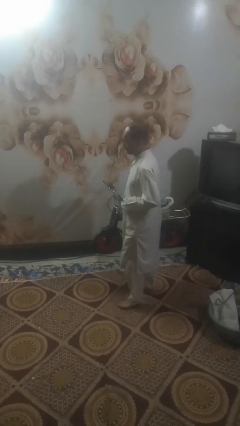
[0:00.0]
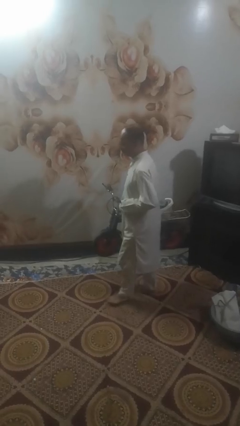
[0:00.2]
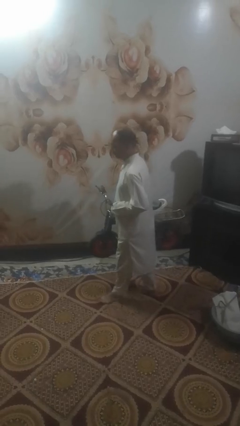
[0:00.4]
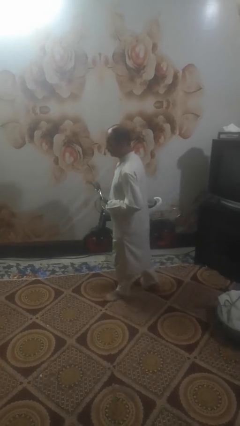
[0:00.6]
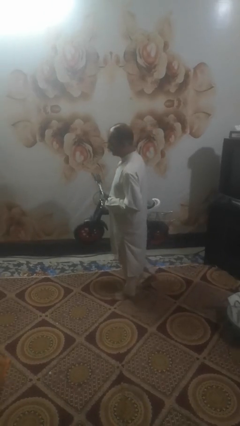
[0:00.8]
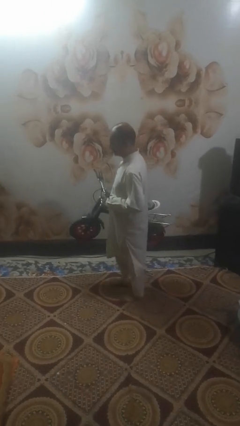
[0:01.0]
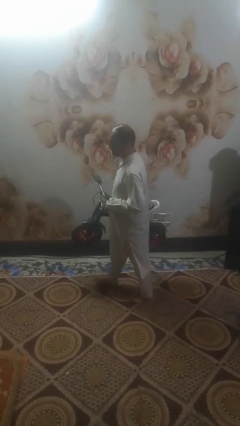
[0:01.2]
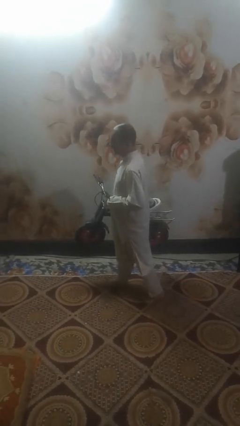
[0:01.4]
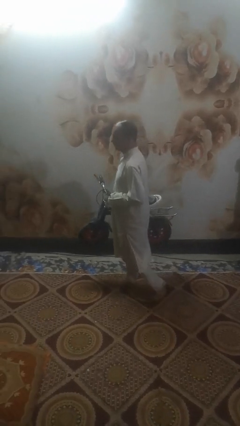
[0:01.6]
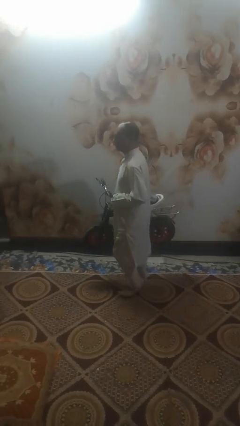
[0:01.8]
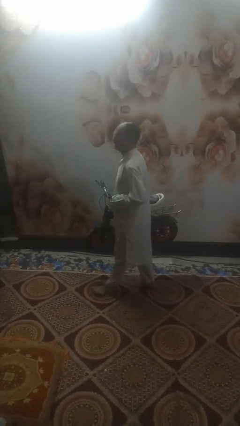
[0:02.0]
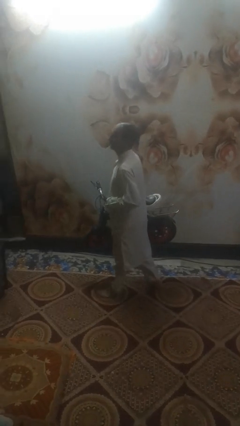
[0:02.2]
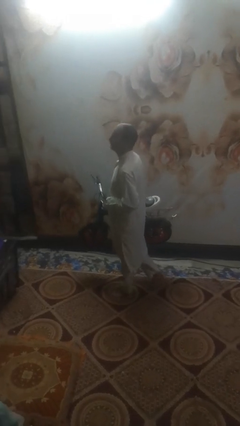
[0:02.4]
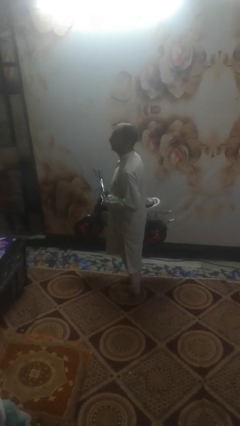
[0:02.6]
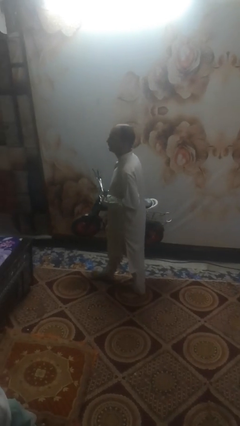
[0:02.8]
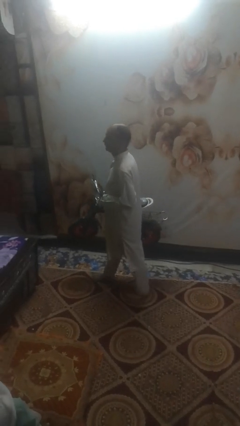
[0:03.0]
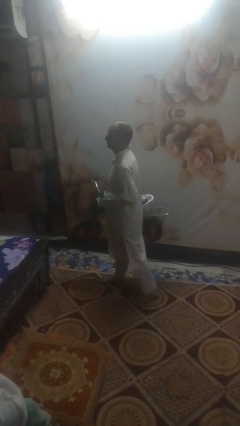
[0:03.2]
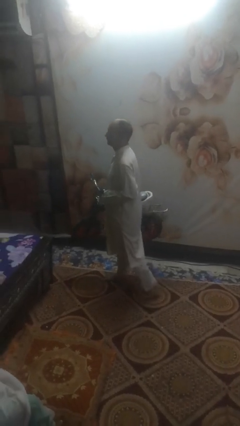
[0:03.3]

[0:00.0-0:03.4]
person carries bicycle

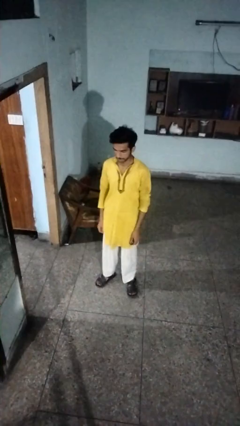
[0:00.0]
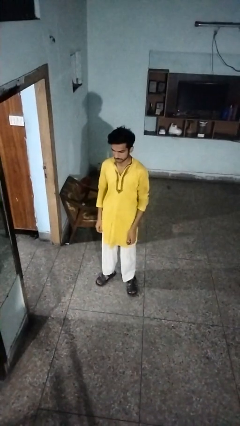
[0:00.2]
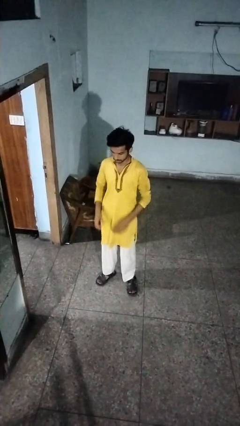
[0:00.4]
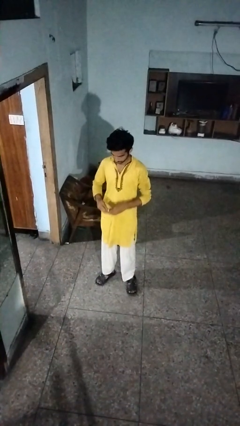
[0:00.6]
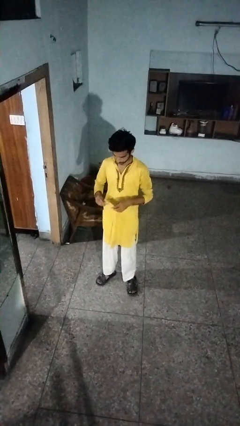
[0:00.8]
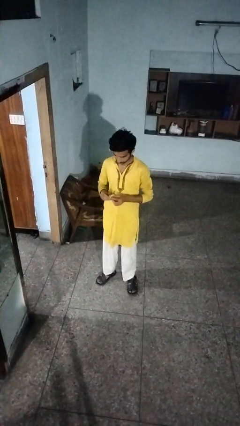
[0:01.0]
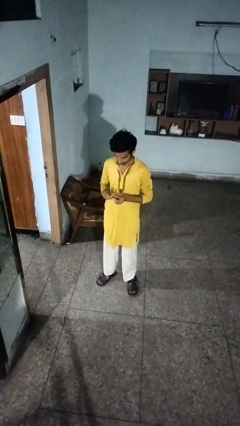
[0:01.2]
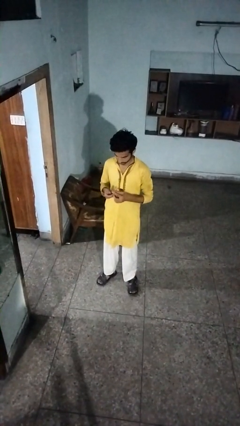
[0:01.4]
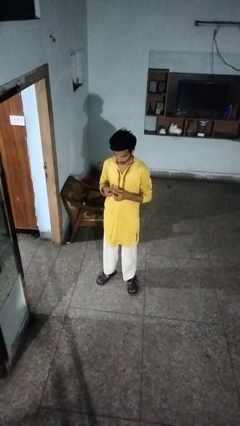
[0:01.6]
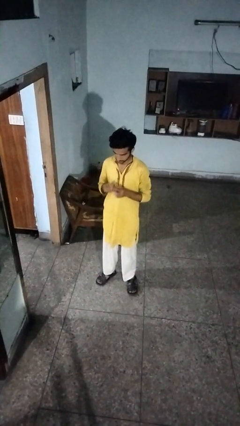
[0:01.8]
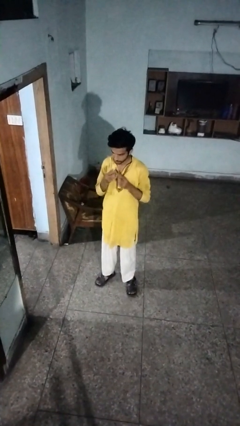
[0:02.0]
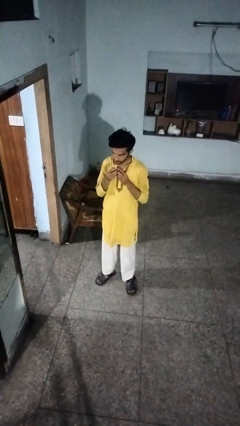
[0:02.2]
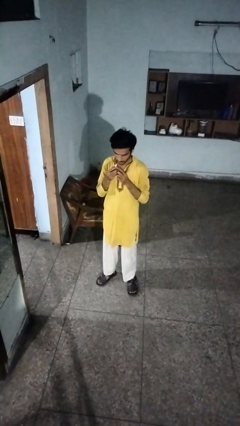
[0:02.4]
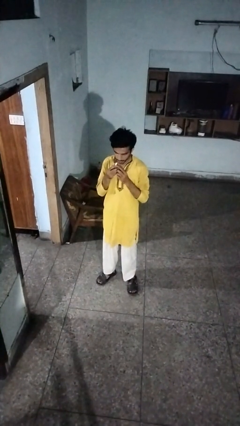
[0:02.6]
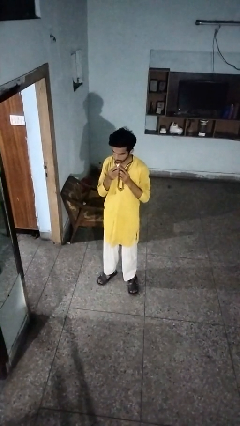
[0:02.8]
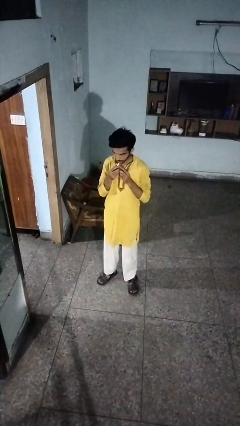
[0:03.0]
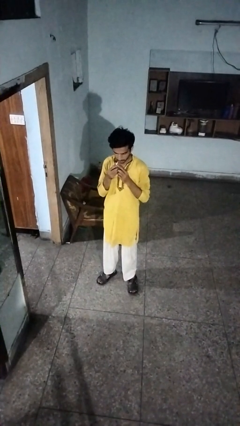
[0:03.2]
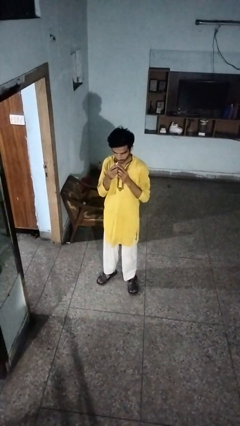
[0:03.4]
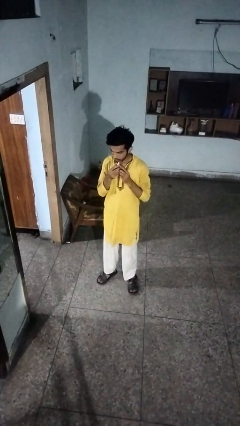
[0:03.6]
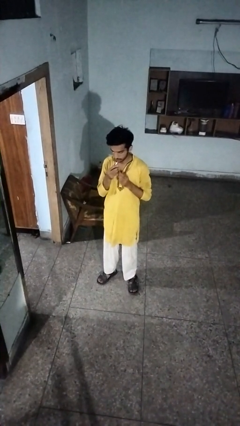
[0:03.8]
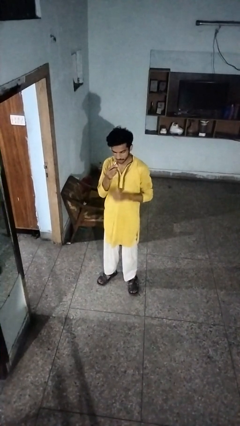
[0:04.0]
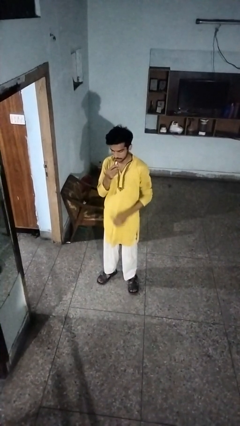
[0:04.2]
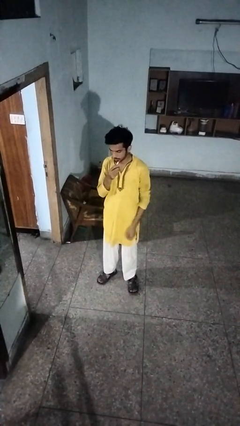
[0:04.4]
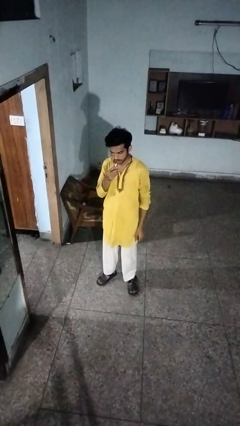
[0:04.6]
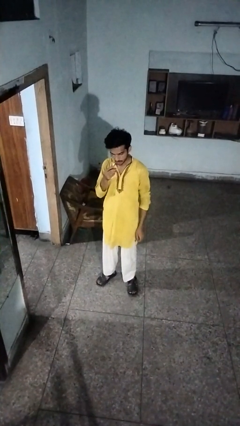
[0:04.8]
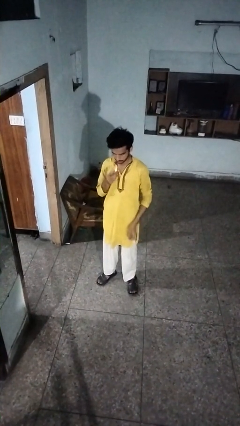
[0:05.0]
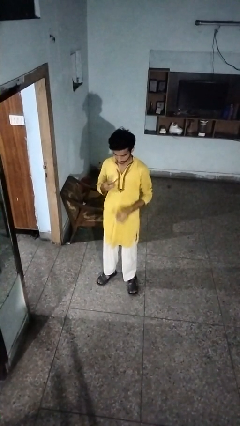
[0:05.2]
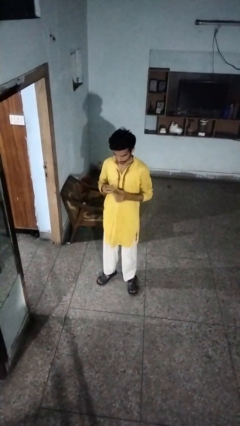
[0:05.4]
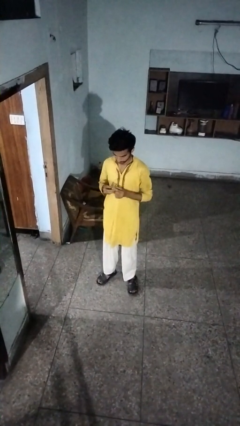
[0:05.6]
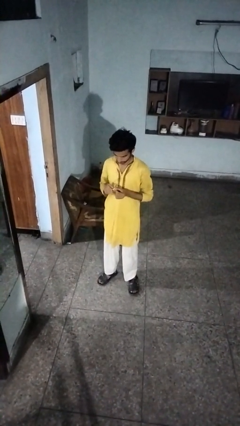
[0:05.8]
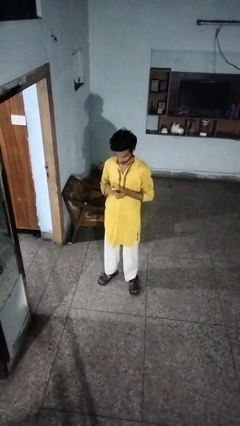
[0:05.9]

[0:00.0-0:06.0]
person applies lip makeup

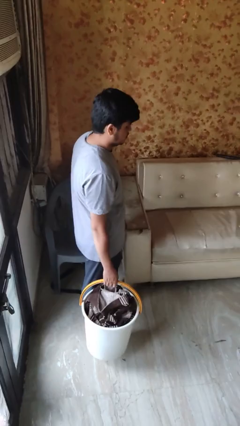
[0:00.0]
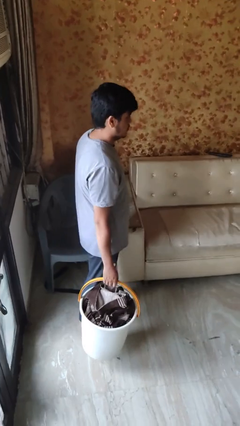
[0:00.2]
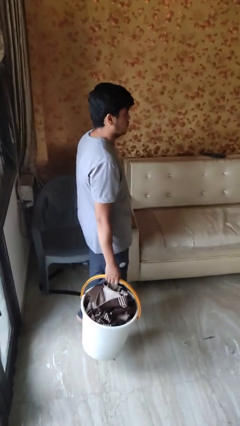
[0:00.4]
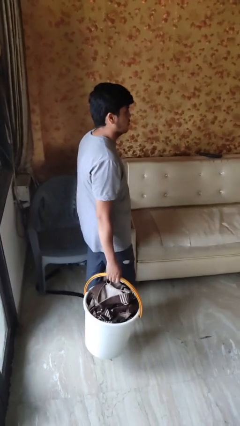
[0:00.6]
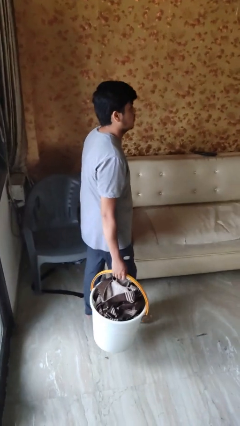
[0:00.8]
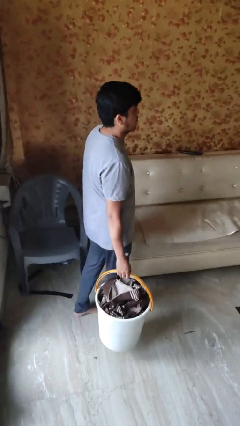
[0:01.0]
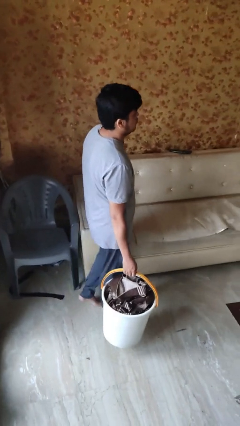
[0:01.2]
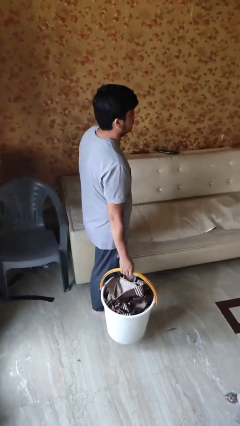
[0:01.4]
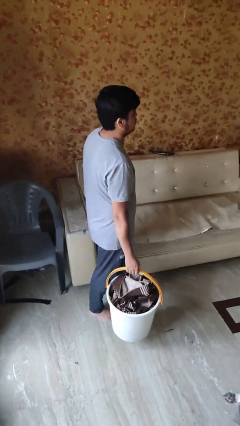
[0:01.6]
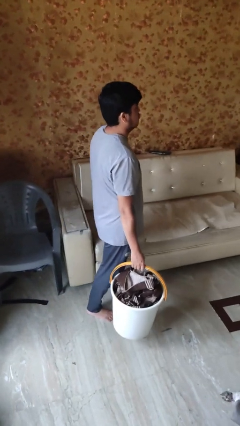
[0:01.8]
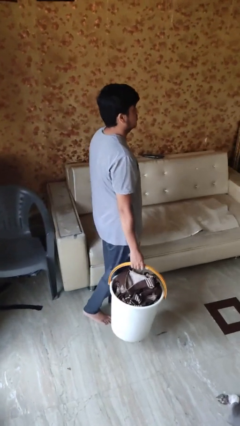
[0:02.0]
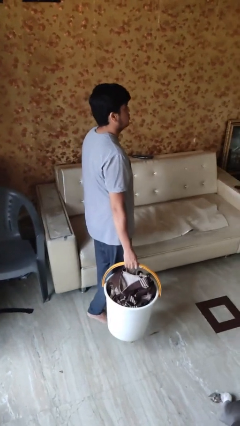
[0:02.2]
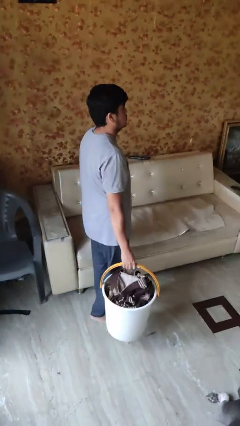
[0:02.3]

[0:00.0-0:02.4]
person carries laundry basket

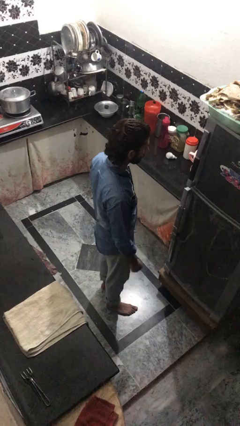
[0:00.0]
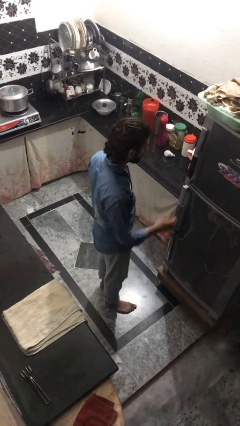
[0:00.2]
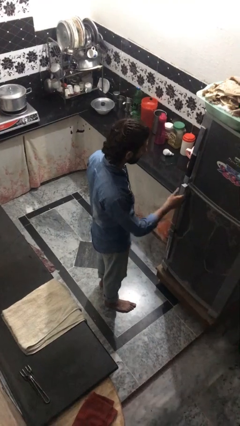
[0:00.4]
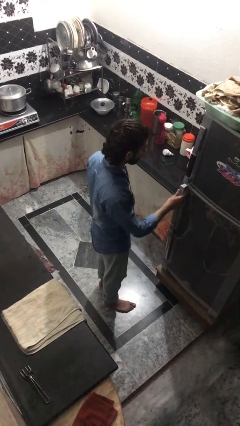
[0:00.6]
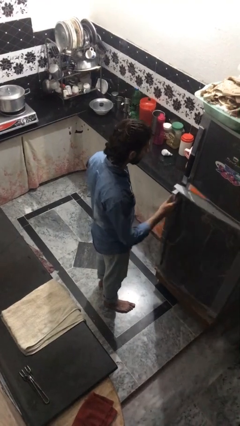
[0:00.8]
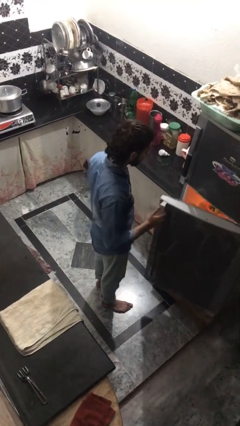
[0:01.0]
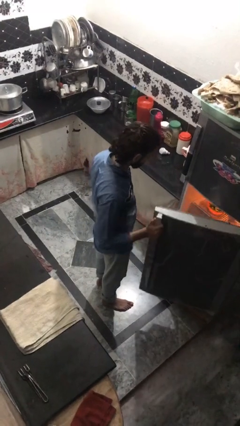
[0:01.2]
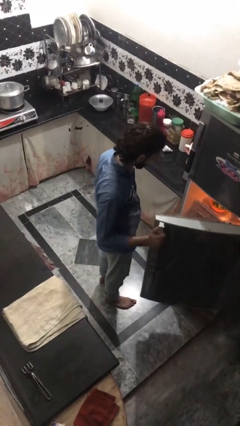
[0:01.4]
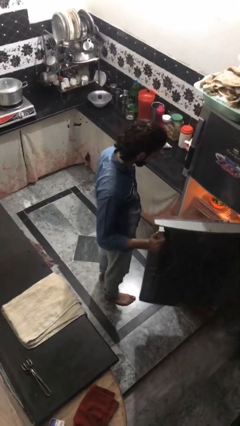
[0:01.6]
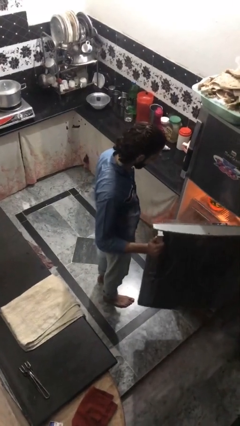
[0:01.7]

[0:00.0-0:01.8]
person opens refrigerator

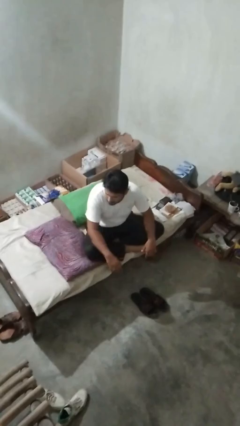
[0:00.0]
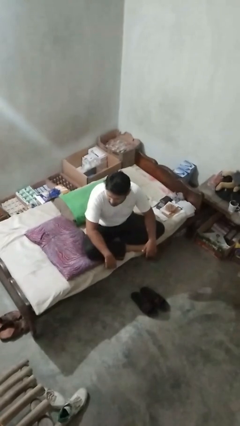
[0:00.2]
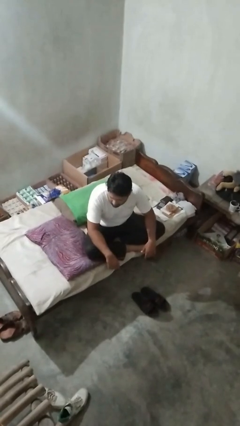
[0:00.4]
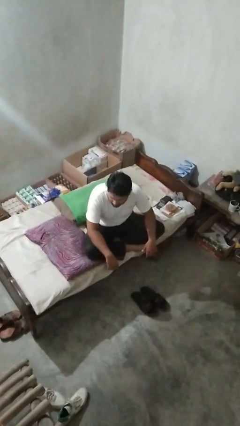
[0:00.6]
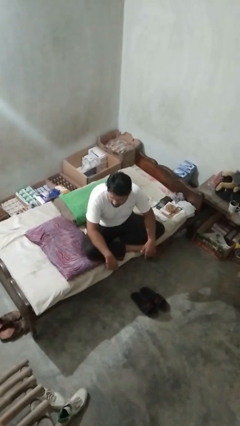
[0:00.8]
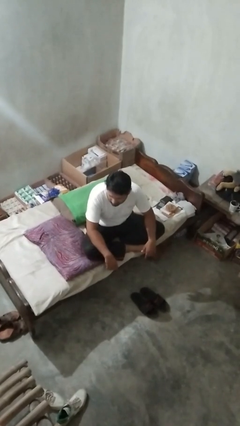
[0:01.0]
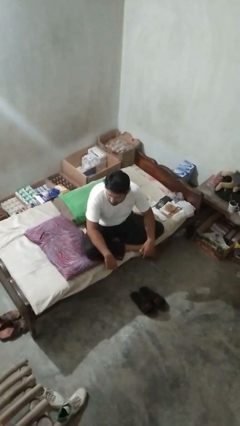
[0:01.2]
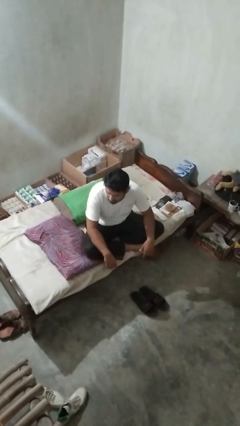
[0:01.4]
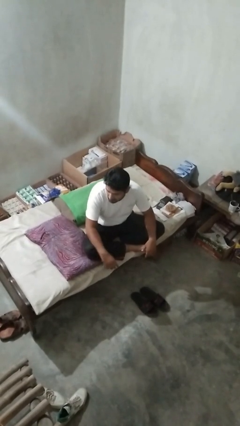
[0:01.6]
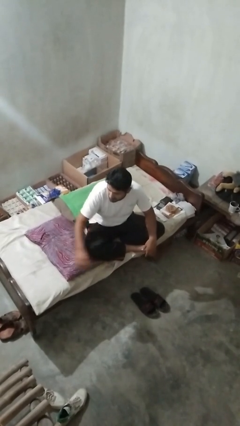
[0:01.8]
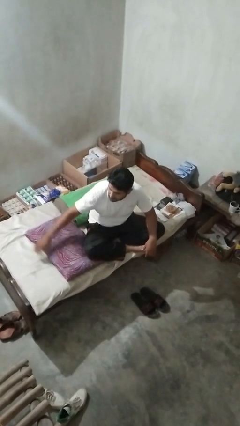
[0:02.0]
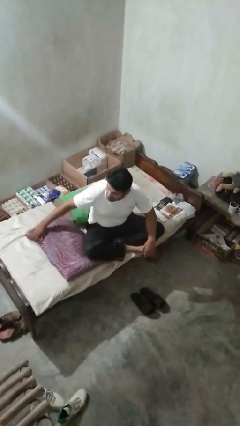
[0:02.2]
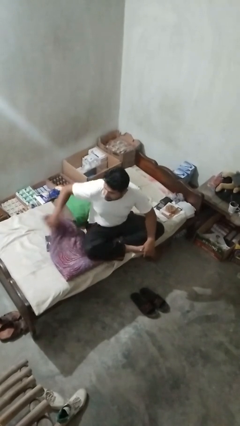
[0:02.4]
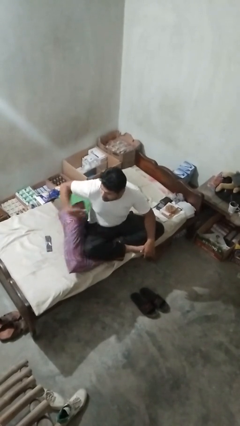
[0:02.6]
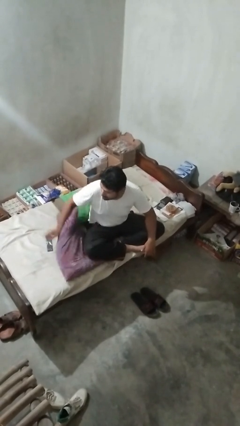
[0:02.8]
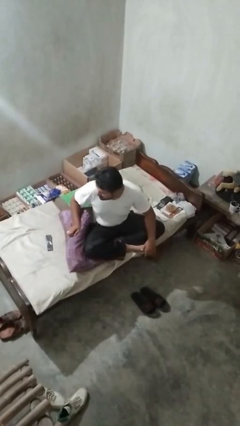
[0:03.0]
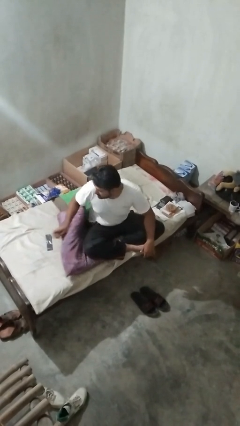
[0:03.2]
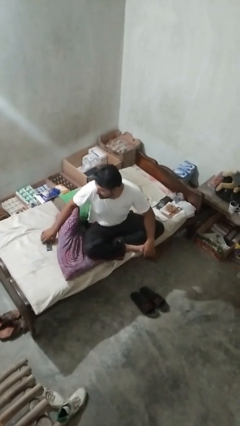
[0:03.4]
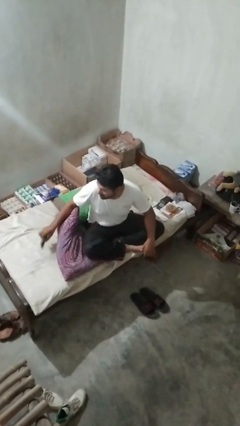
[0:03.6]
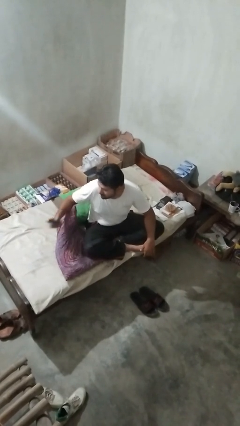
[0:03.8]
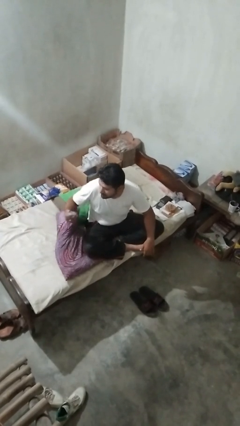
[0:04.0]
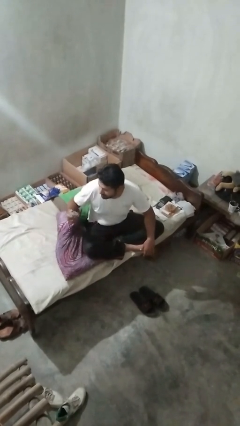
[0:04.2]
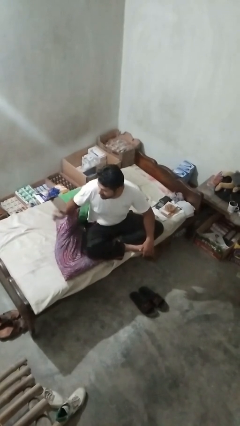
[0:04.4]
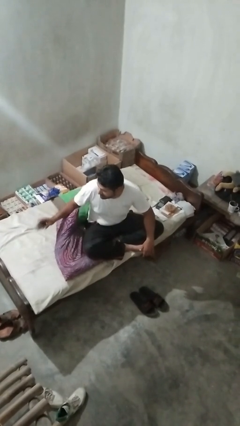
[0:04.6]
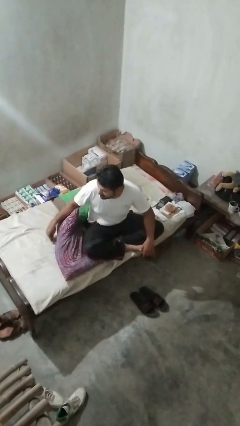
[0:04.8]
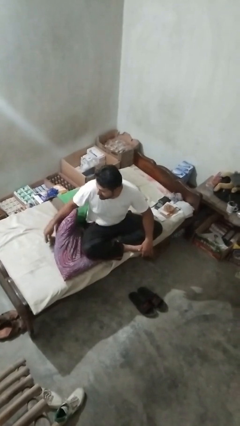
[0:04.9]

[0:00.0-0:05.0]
person searches in couch
